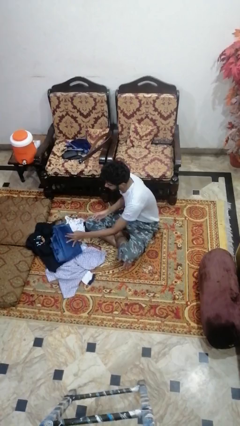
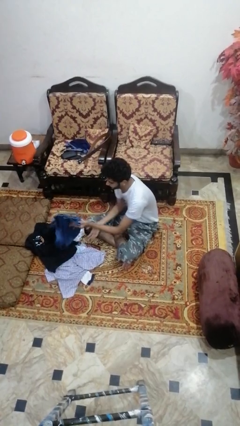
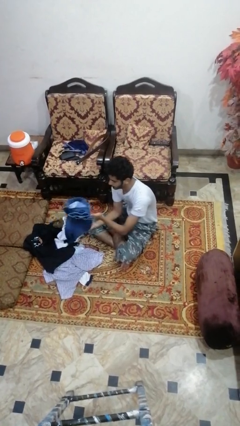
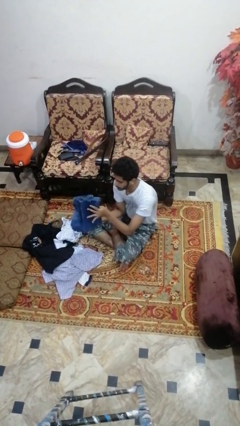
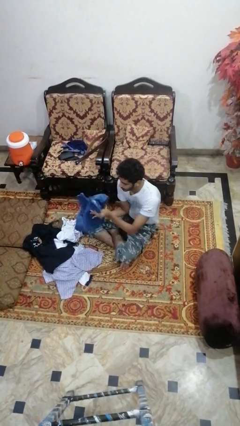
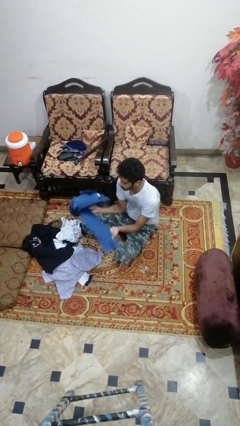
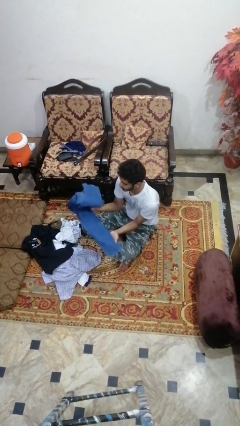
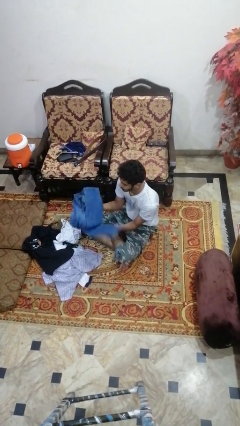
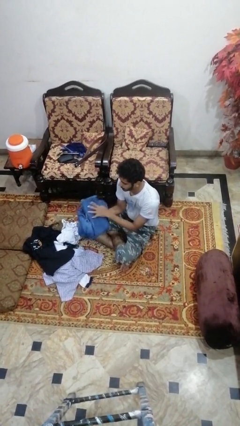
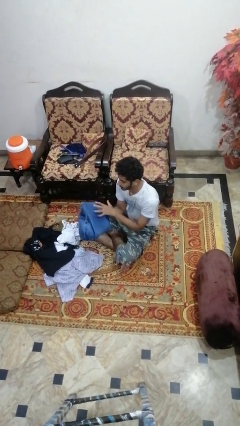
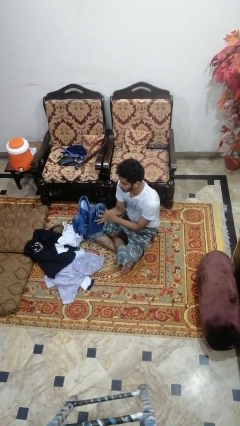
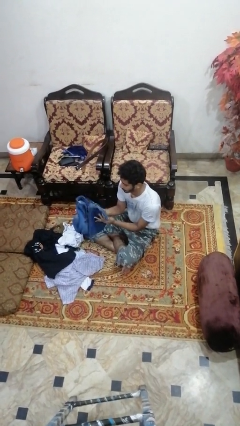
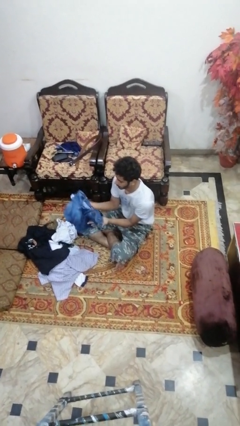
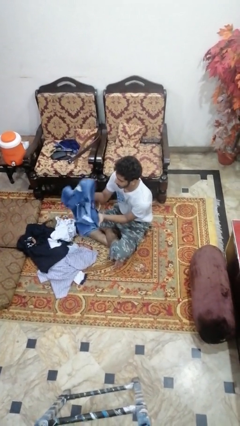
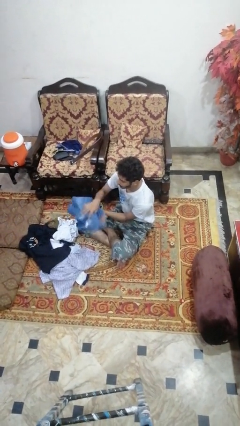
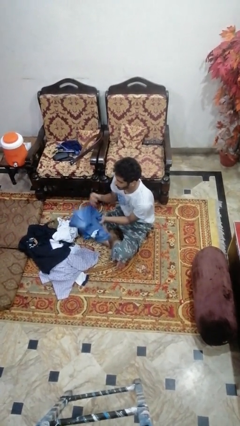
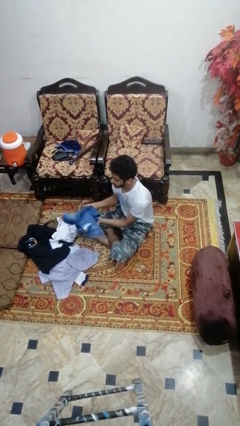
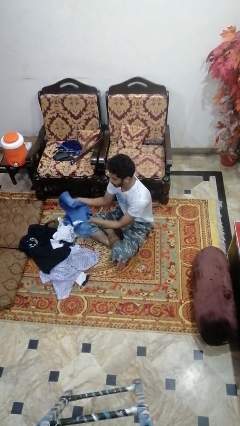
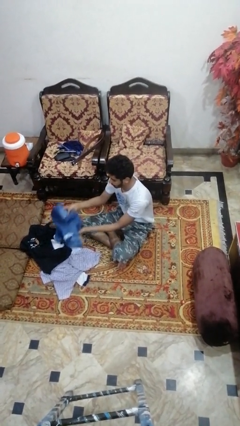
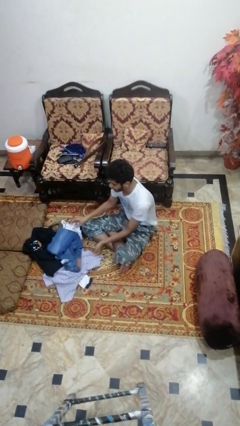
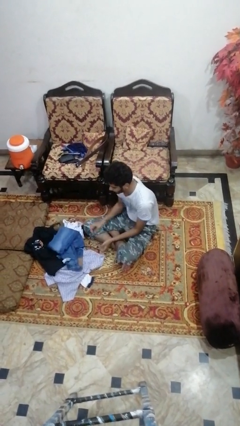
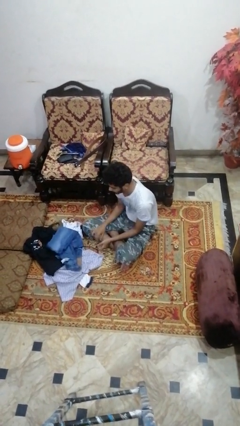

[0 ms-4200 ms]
person folds pants

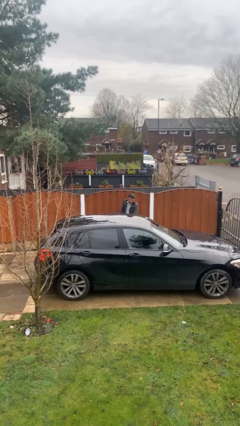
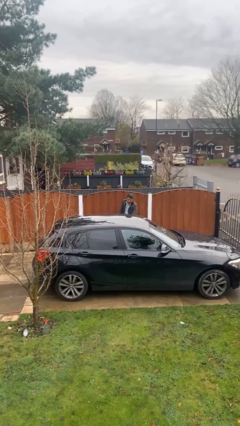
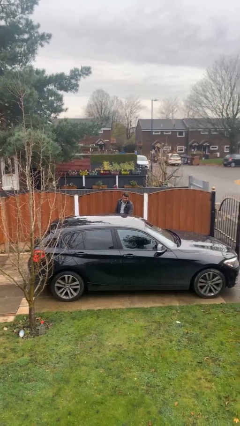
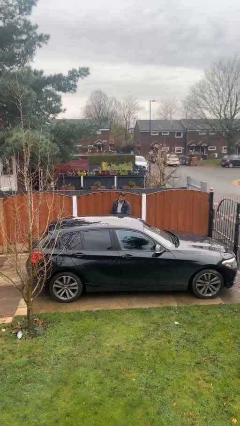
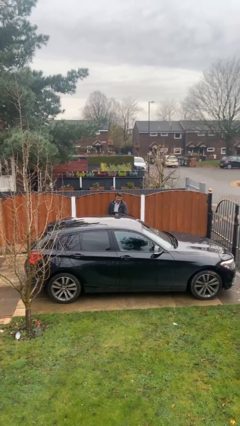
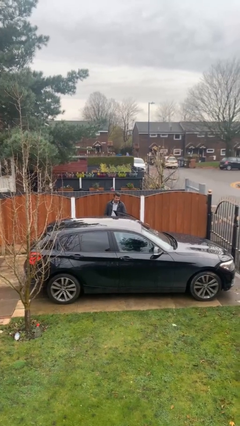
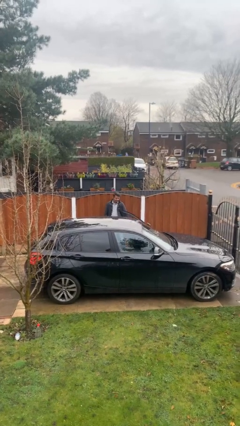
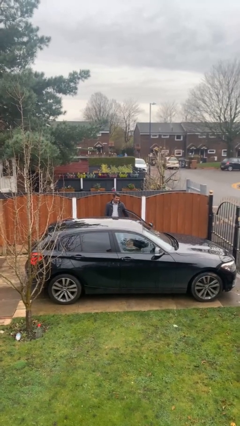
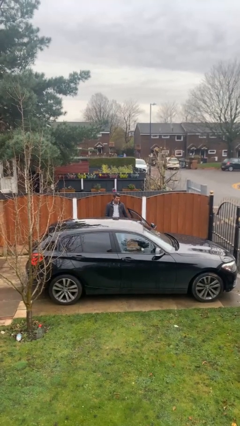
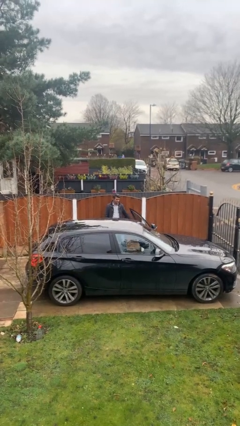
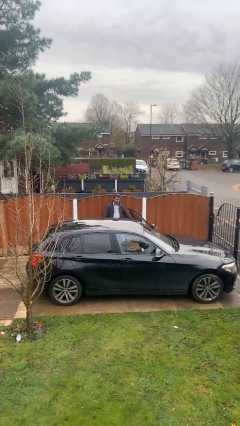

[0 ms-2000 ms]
person opens car door

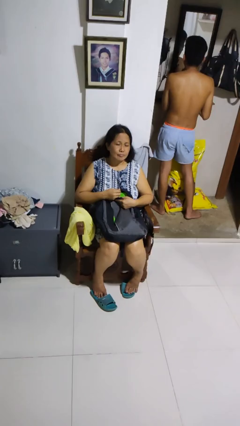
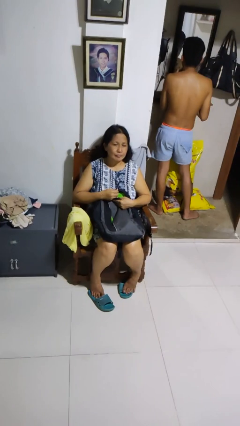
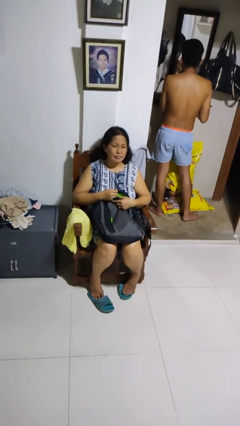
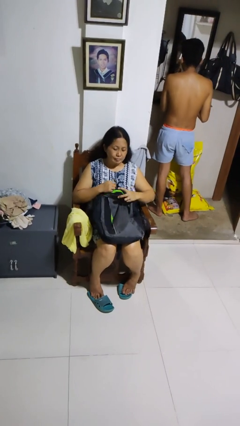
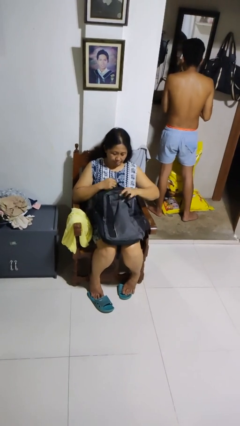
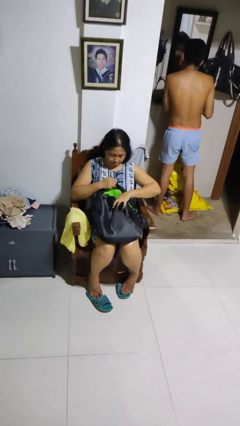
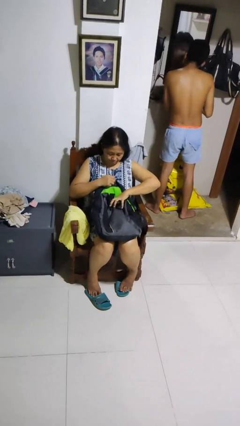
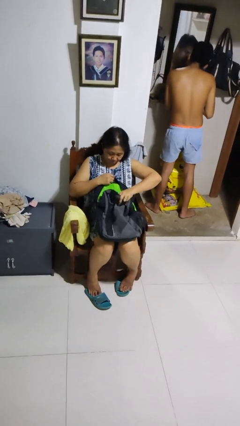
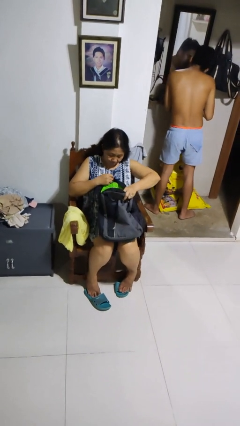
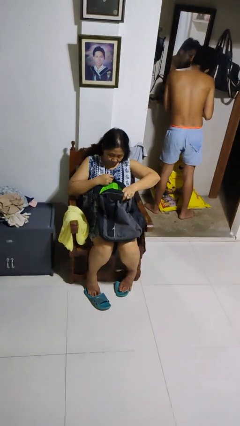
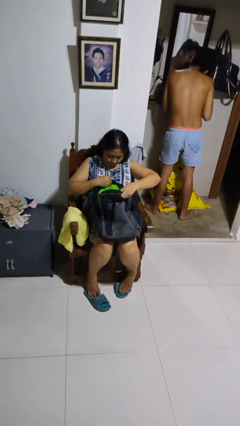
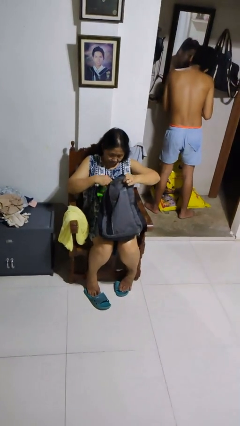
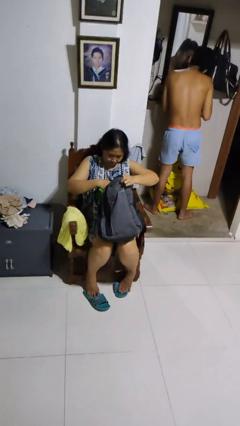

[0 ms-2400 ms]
person searches in backpack

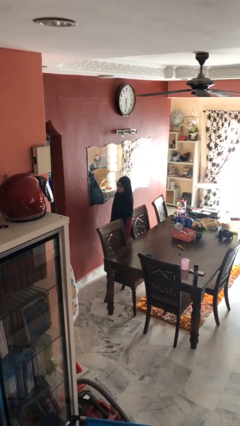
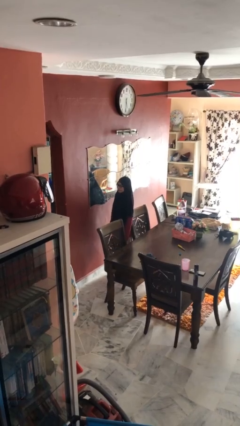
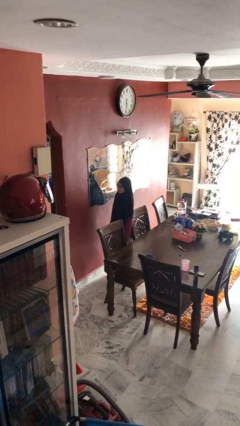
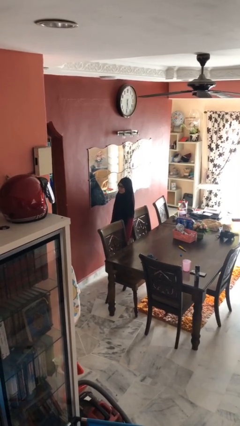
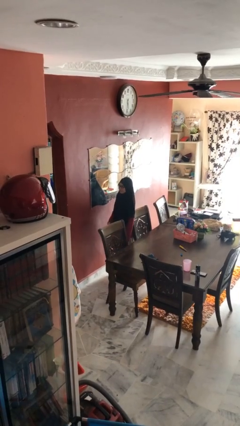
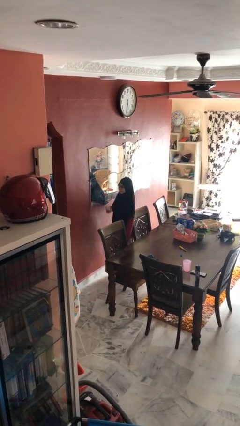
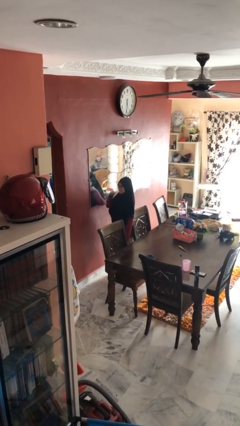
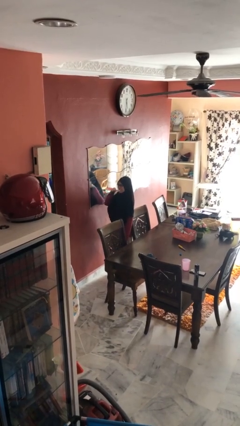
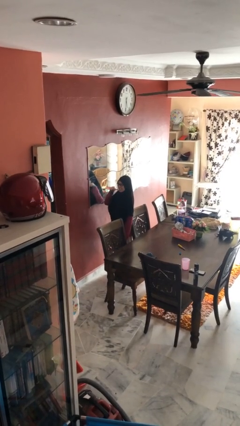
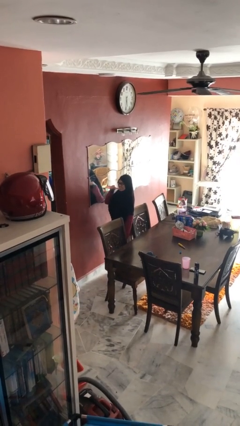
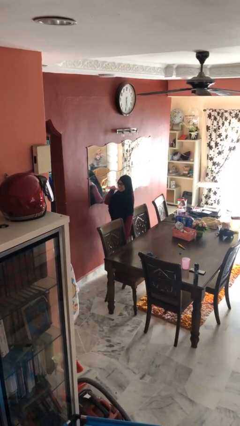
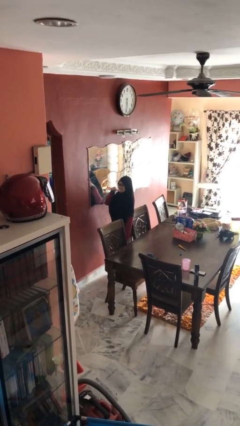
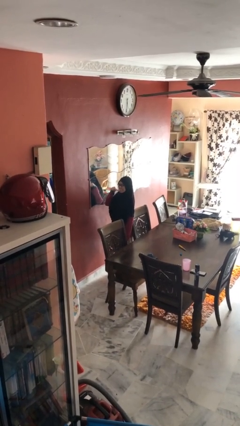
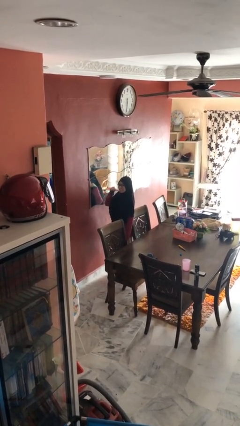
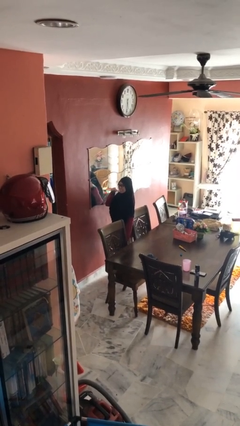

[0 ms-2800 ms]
person brushes teeth

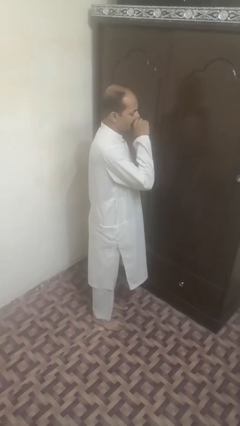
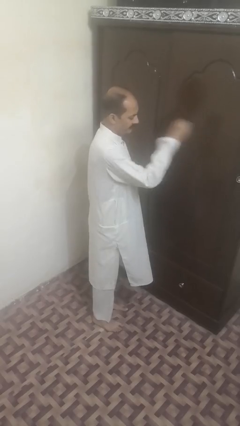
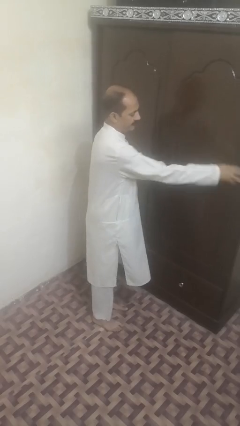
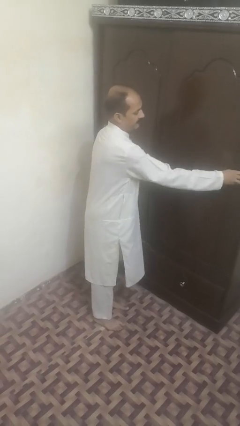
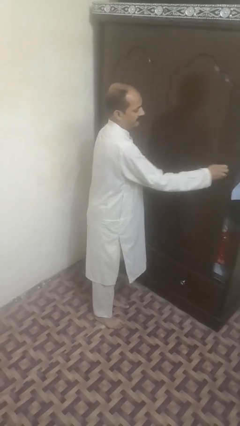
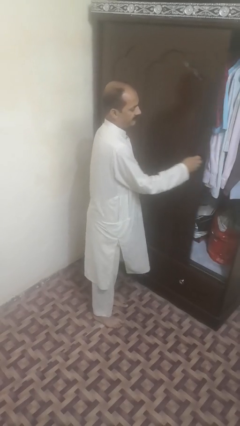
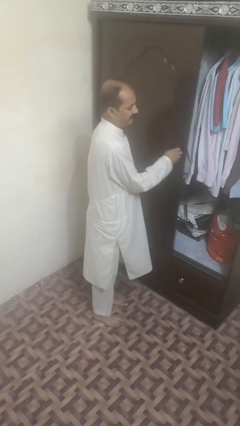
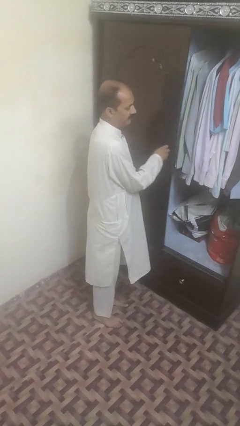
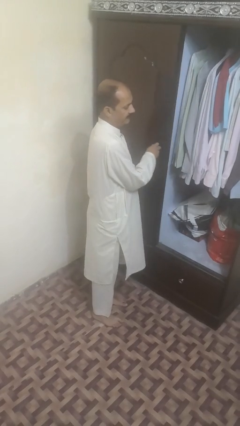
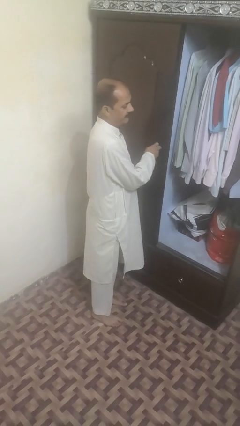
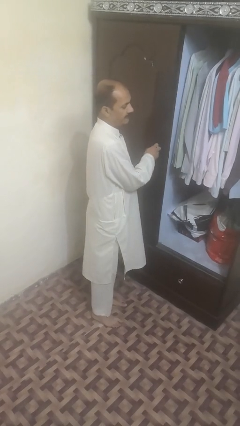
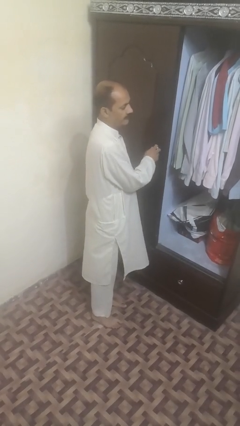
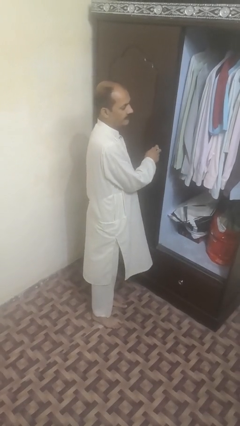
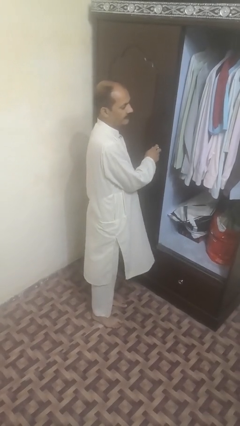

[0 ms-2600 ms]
person opens sliding door

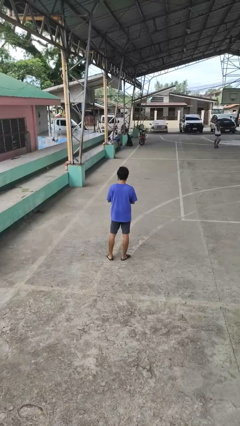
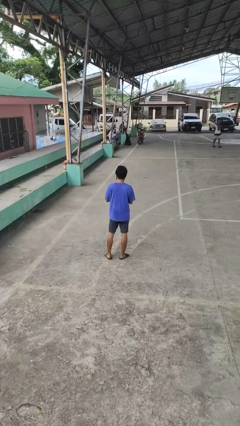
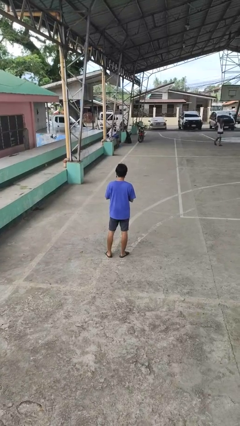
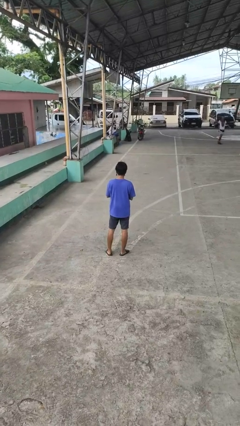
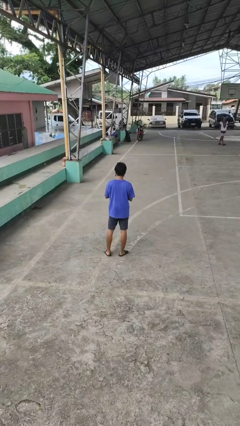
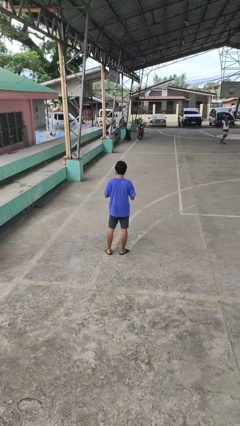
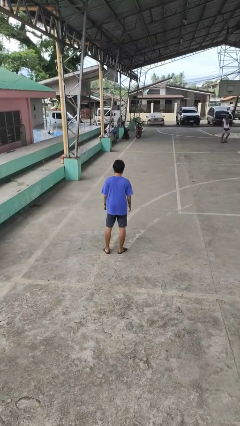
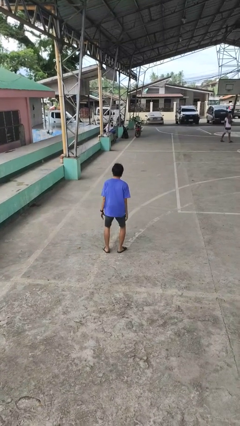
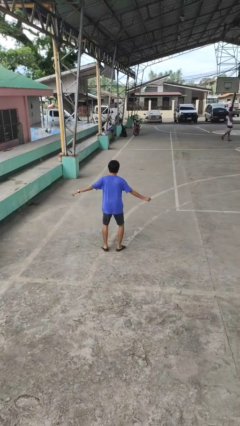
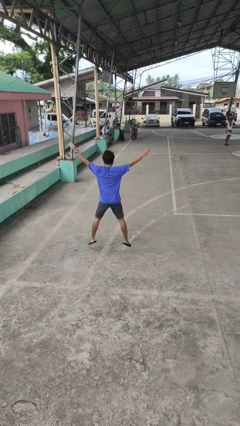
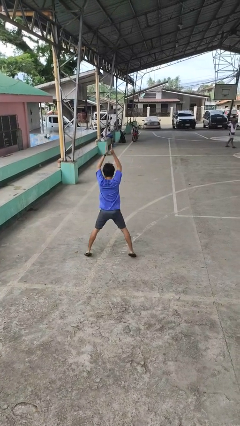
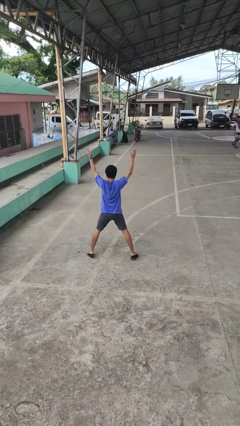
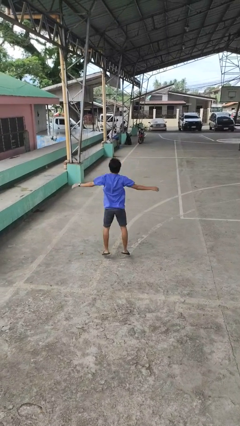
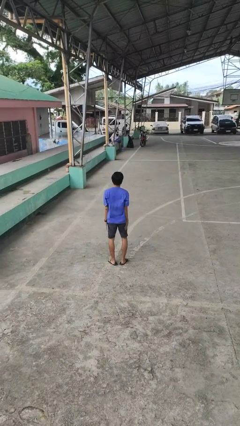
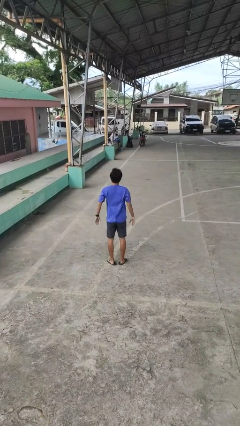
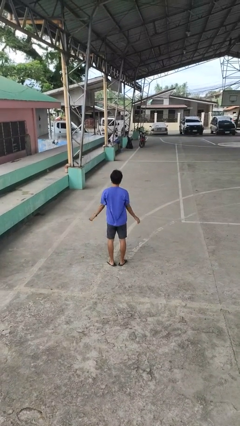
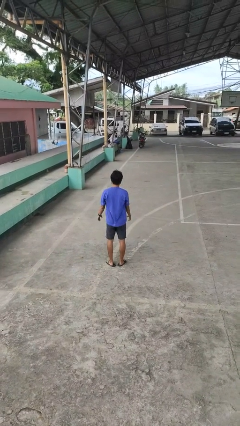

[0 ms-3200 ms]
person exercises with jumping jacks

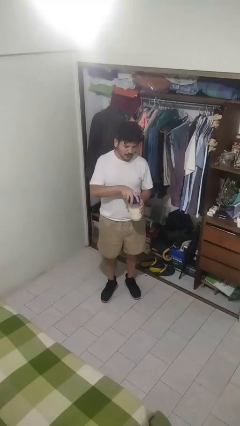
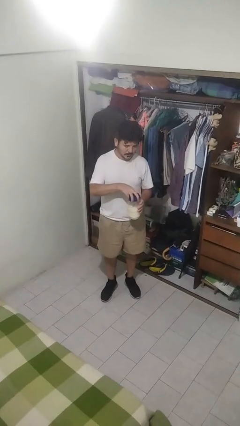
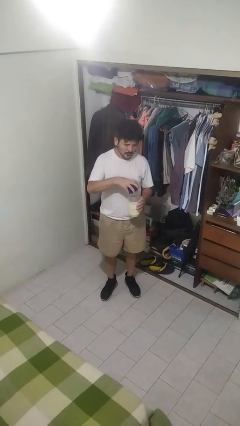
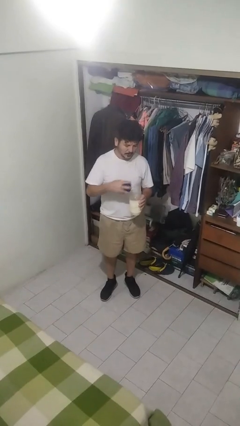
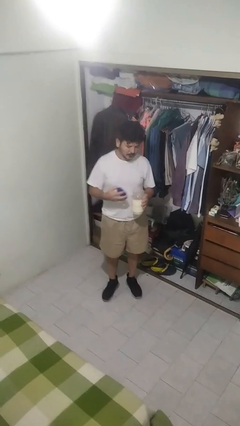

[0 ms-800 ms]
person opens jar
